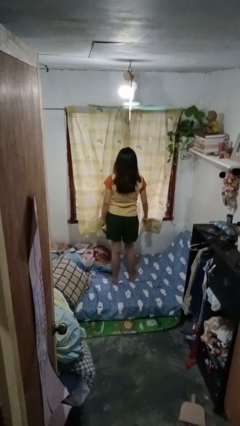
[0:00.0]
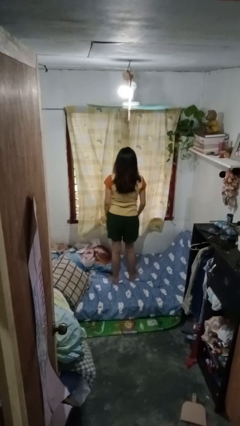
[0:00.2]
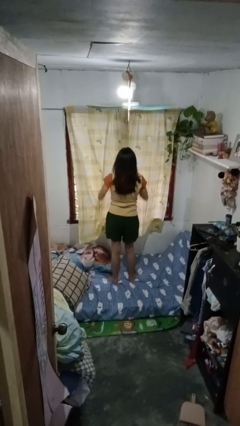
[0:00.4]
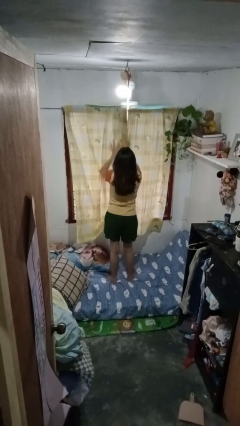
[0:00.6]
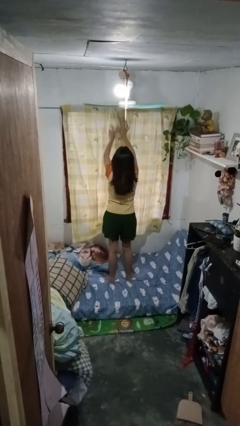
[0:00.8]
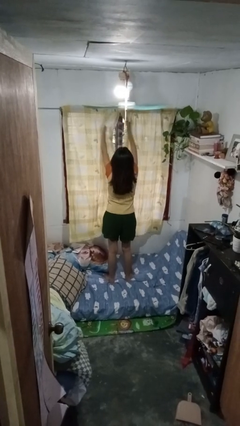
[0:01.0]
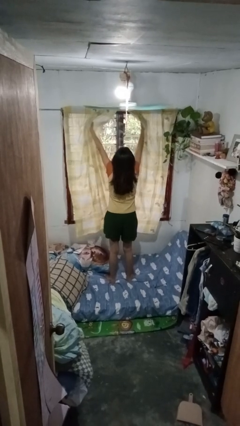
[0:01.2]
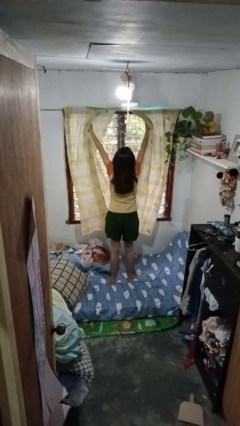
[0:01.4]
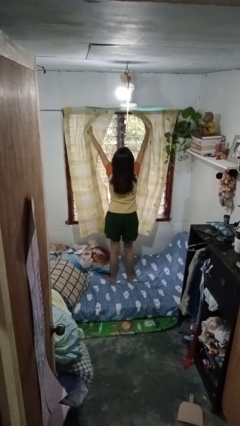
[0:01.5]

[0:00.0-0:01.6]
person opens curtains

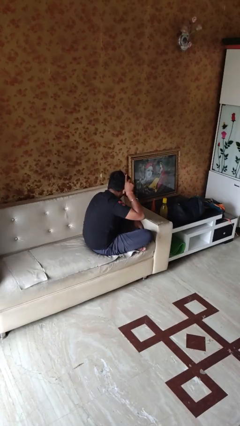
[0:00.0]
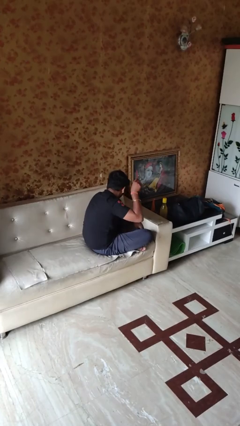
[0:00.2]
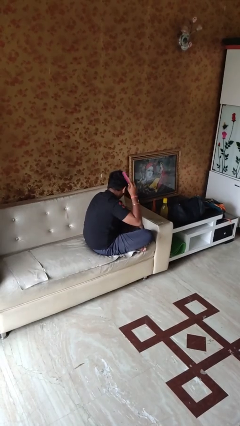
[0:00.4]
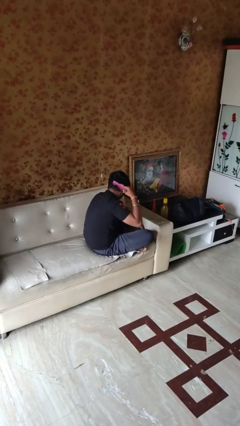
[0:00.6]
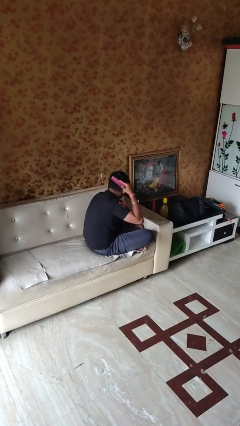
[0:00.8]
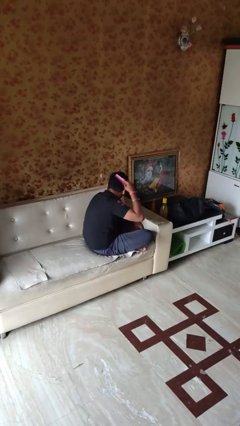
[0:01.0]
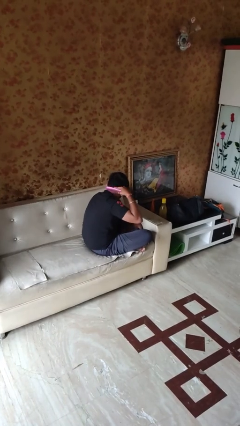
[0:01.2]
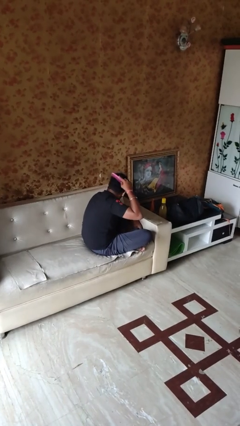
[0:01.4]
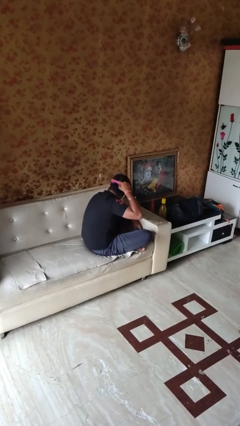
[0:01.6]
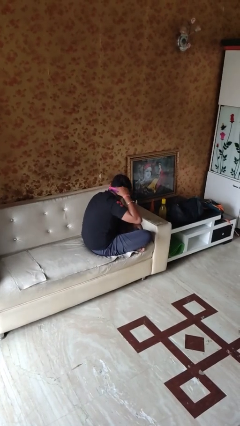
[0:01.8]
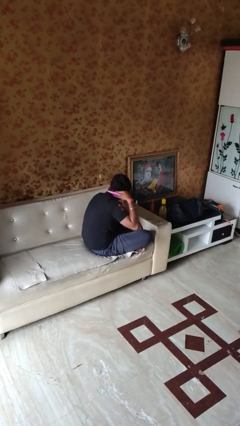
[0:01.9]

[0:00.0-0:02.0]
person brushes hair

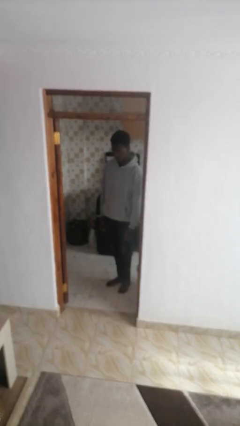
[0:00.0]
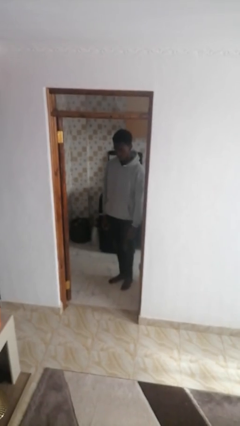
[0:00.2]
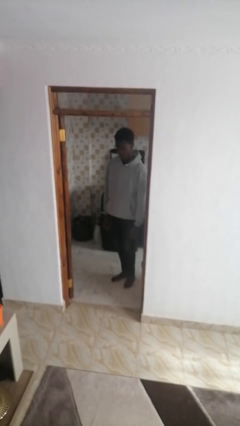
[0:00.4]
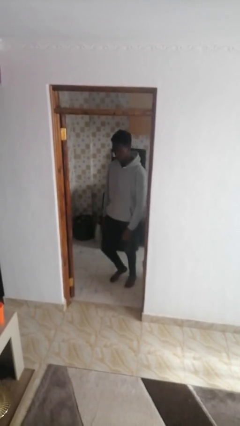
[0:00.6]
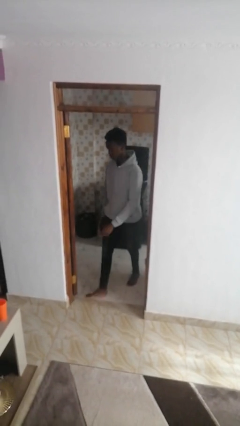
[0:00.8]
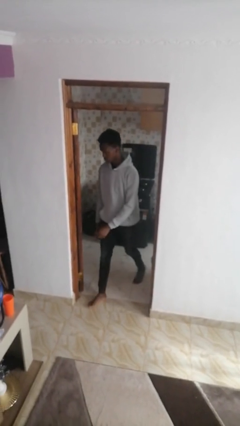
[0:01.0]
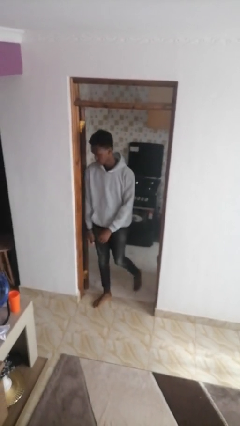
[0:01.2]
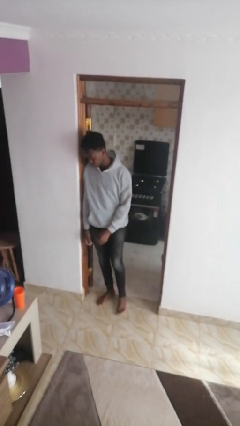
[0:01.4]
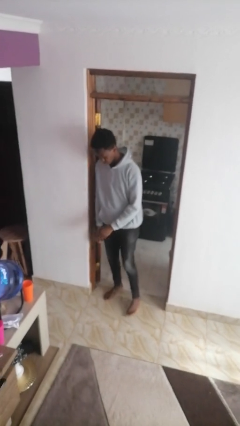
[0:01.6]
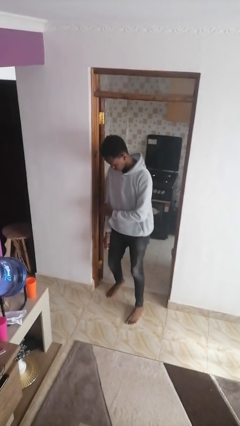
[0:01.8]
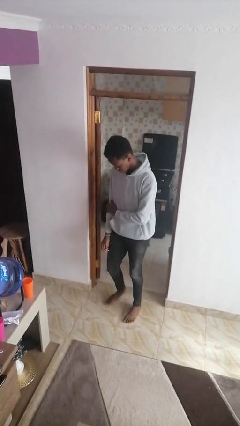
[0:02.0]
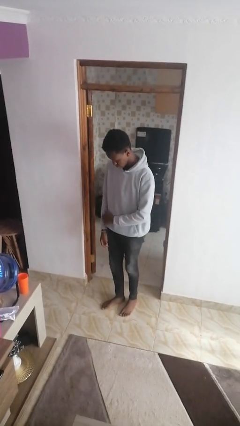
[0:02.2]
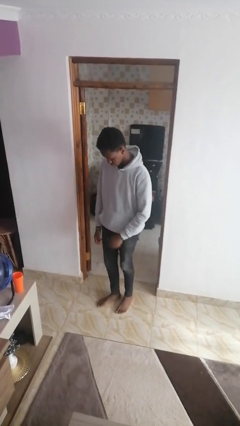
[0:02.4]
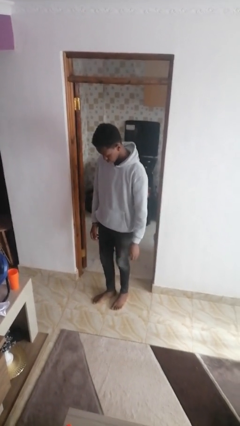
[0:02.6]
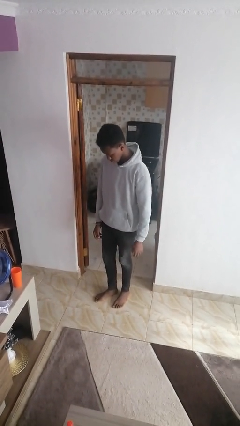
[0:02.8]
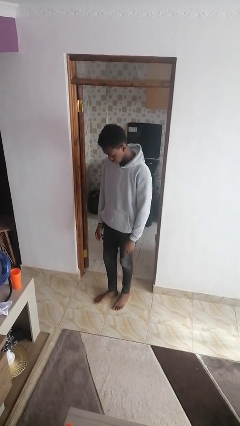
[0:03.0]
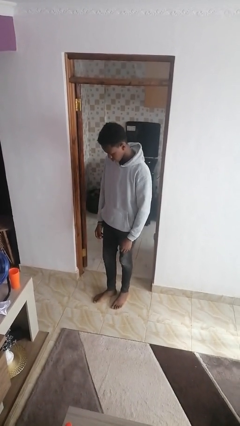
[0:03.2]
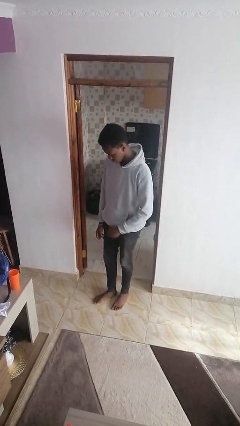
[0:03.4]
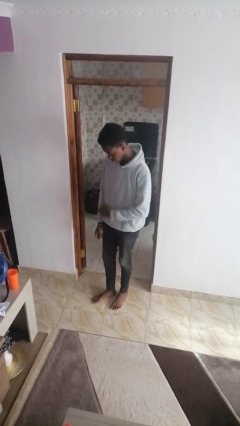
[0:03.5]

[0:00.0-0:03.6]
person bumps into wall

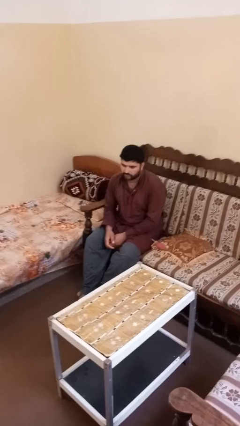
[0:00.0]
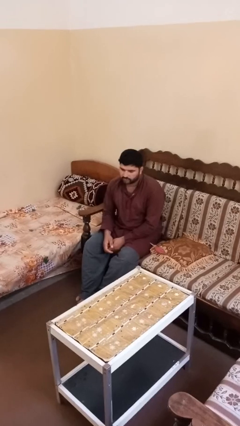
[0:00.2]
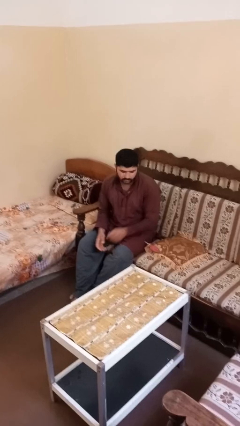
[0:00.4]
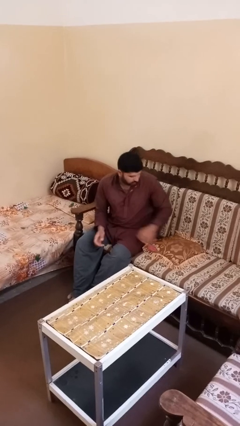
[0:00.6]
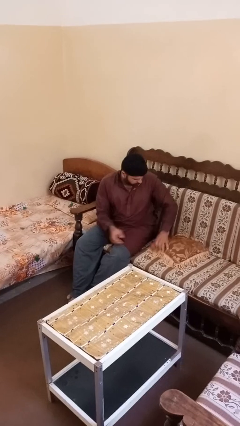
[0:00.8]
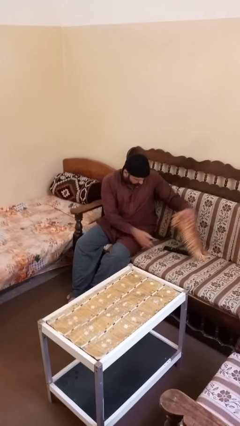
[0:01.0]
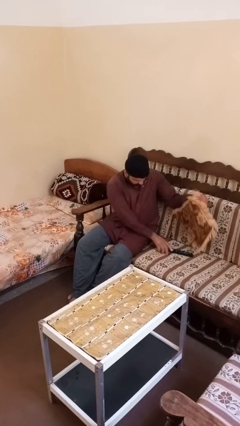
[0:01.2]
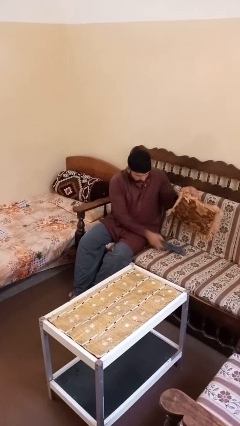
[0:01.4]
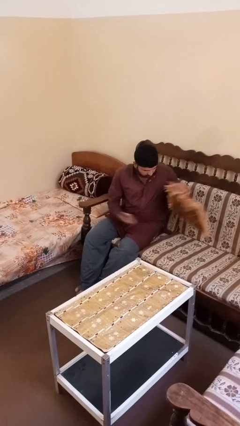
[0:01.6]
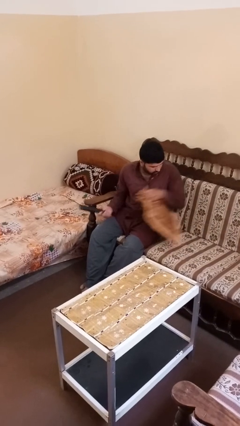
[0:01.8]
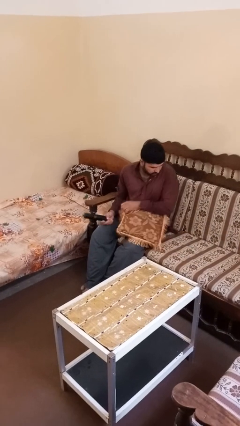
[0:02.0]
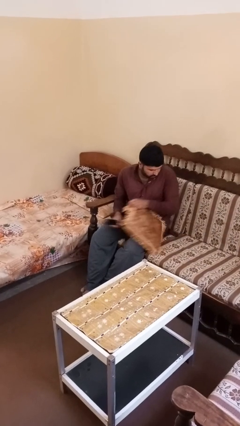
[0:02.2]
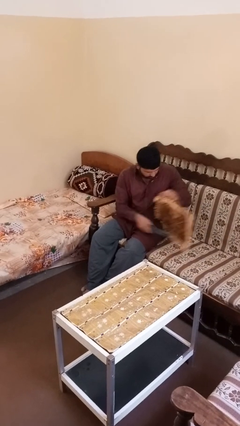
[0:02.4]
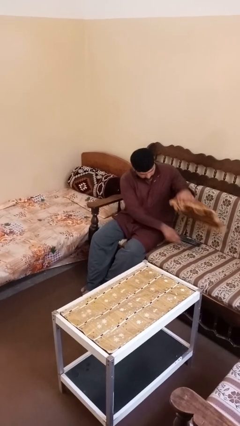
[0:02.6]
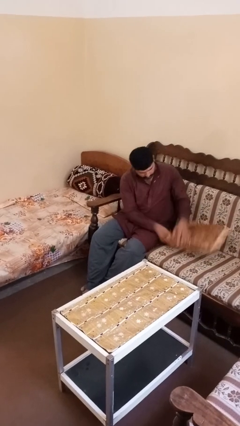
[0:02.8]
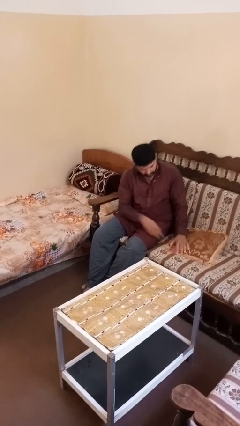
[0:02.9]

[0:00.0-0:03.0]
person searches in couch

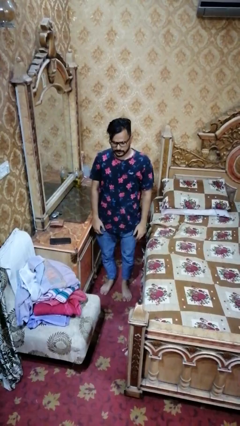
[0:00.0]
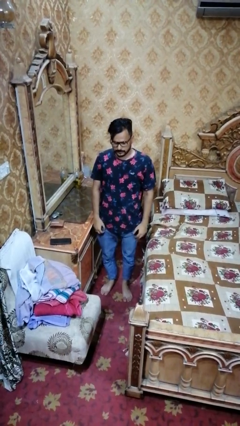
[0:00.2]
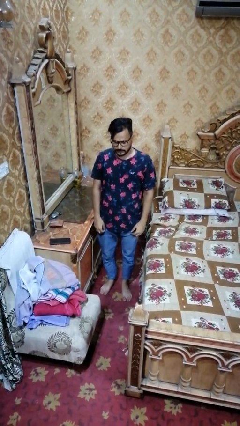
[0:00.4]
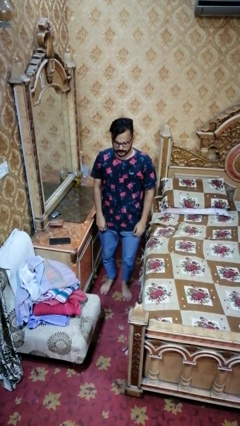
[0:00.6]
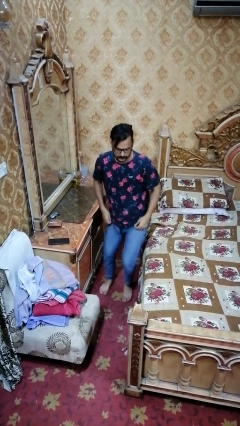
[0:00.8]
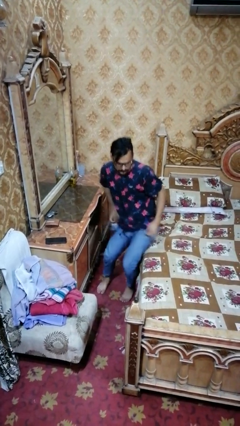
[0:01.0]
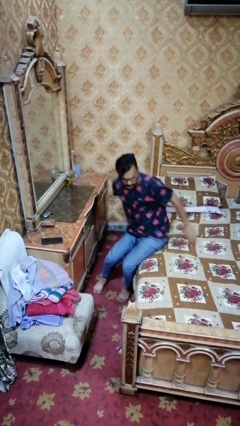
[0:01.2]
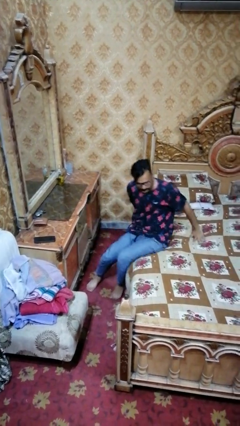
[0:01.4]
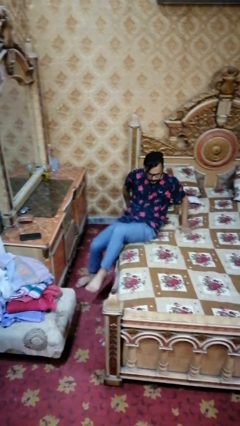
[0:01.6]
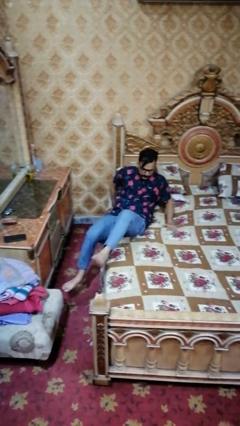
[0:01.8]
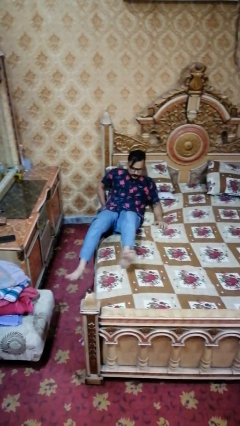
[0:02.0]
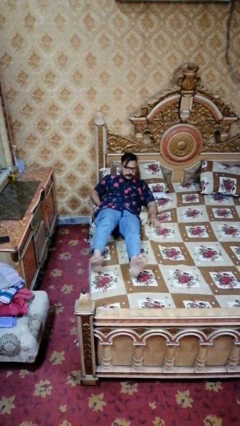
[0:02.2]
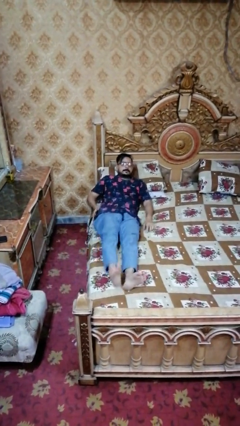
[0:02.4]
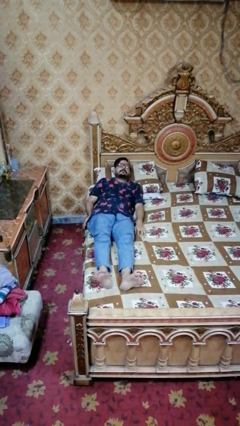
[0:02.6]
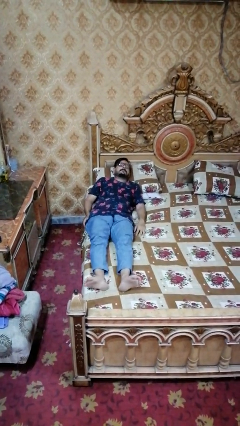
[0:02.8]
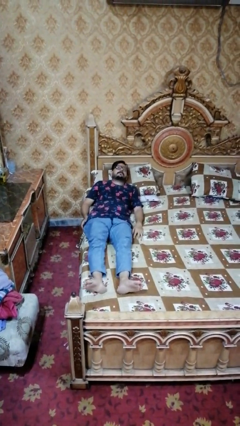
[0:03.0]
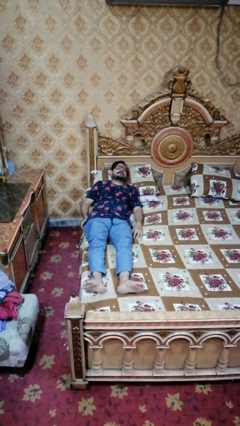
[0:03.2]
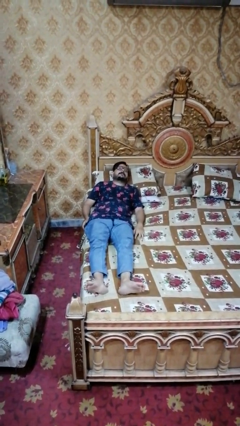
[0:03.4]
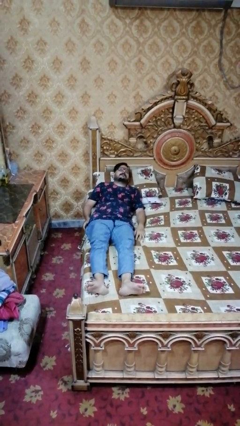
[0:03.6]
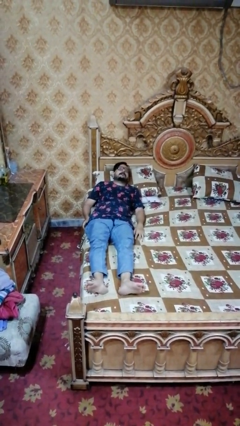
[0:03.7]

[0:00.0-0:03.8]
person lies down on bed

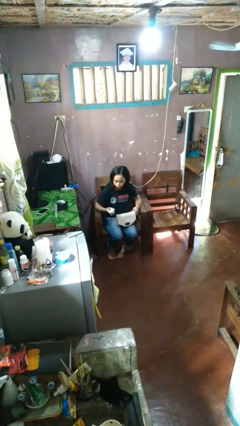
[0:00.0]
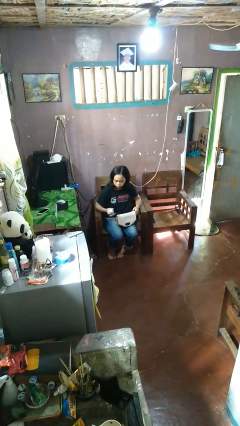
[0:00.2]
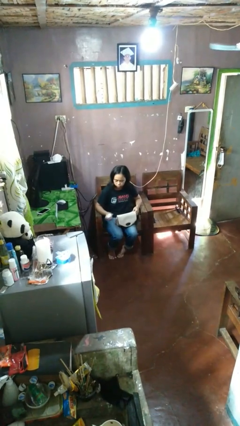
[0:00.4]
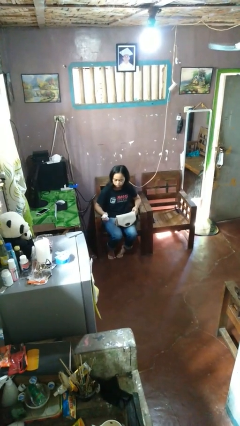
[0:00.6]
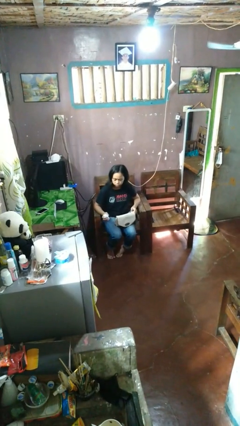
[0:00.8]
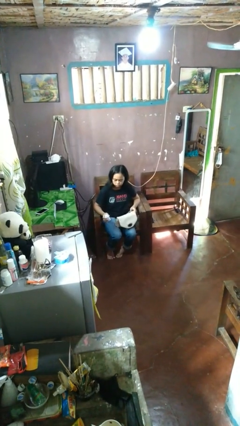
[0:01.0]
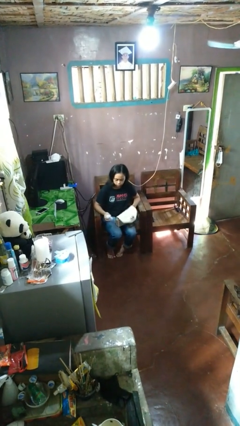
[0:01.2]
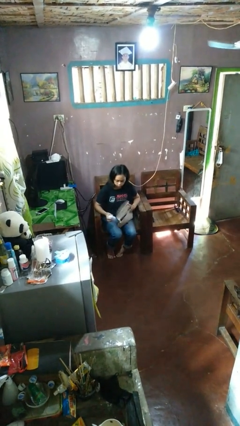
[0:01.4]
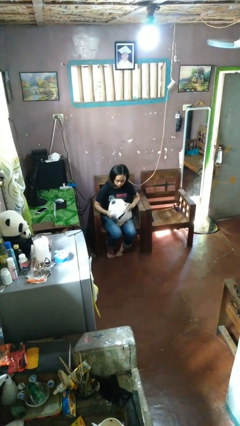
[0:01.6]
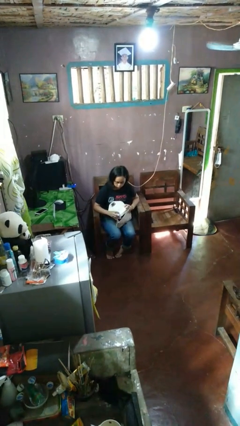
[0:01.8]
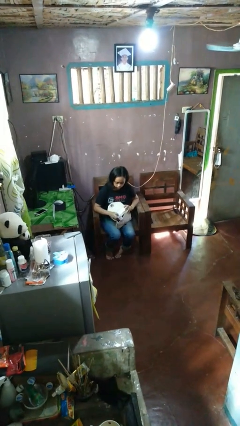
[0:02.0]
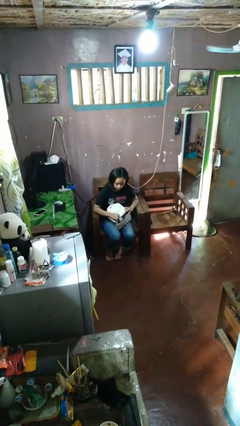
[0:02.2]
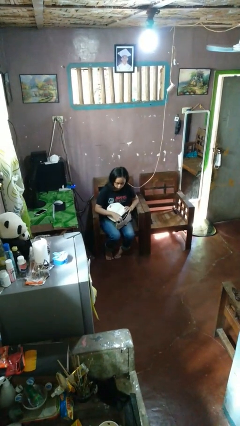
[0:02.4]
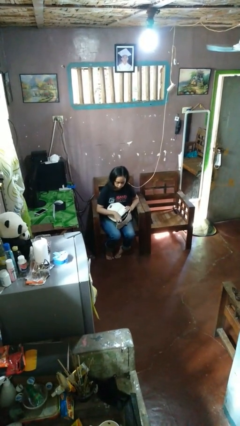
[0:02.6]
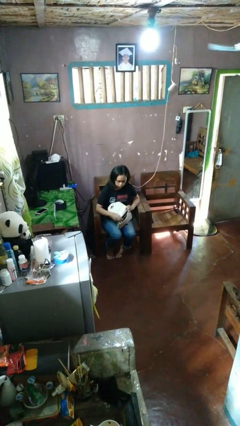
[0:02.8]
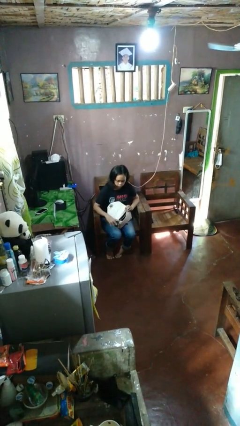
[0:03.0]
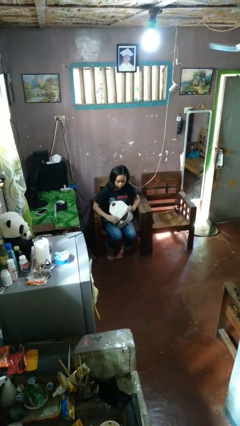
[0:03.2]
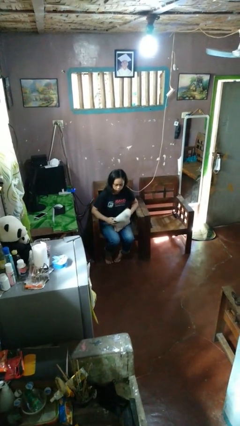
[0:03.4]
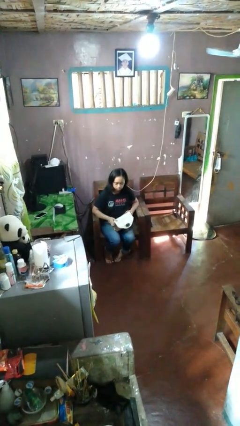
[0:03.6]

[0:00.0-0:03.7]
person puts object into purse
